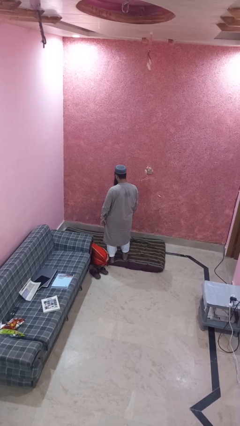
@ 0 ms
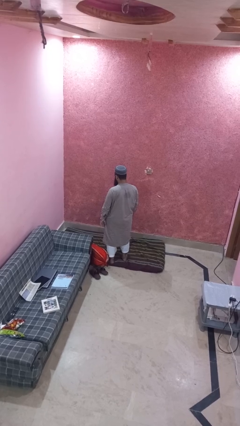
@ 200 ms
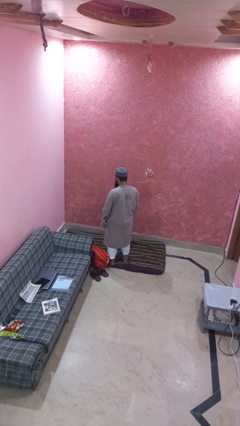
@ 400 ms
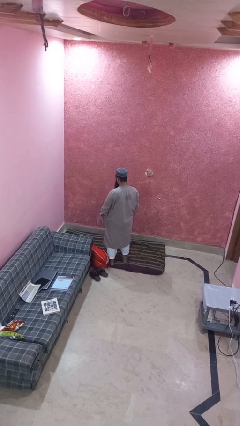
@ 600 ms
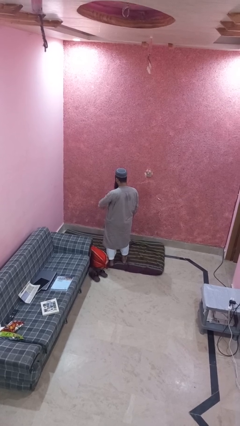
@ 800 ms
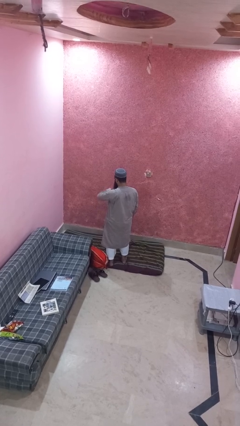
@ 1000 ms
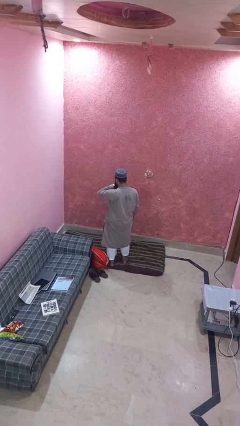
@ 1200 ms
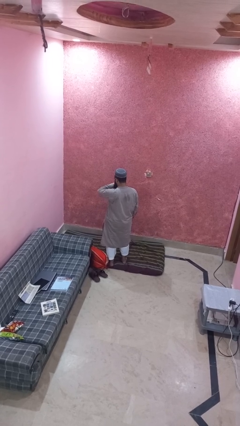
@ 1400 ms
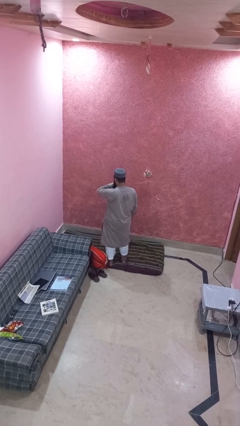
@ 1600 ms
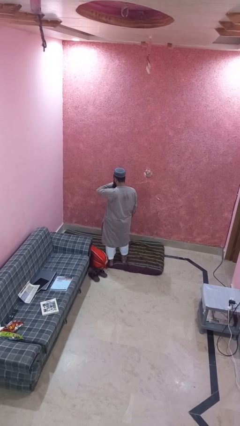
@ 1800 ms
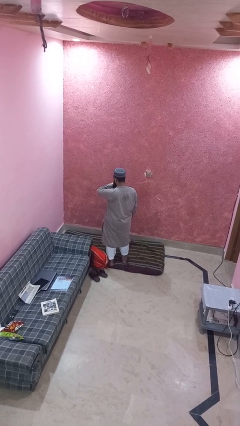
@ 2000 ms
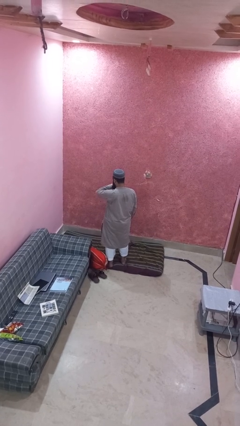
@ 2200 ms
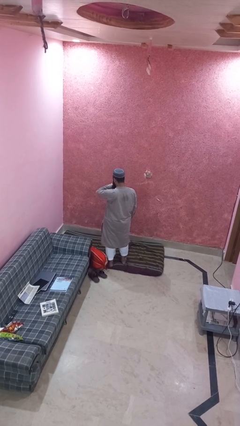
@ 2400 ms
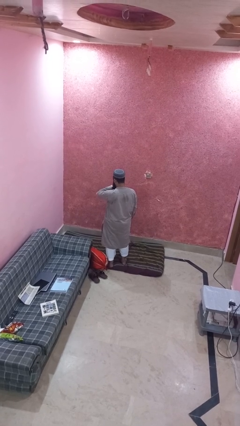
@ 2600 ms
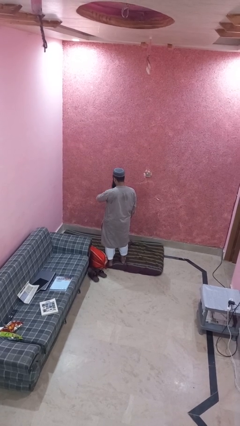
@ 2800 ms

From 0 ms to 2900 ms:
person looks at wristwatch

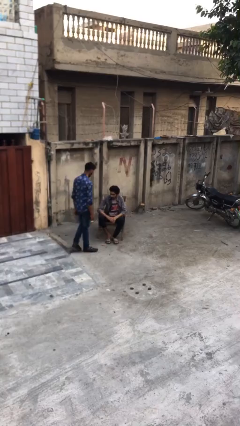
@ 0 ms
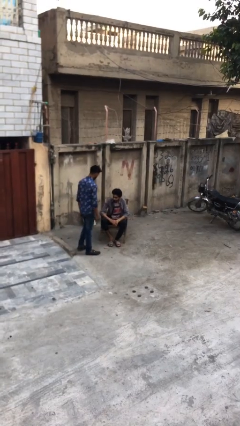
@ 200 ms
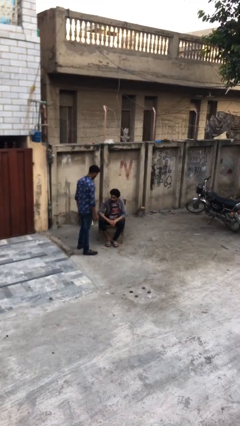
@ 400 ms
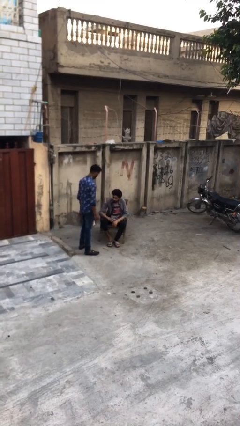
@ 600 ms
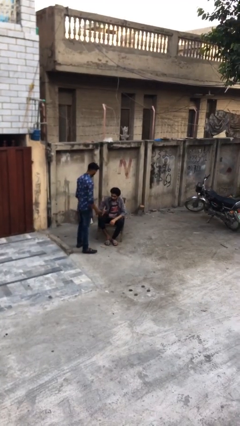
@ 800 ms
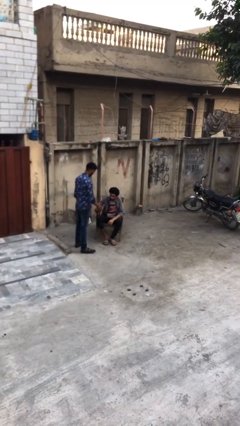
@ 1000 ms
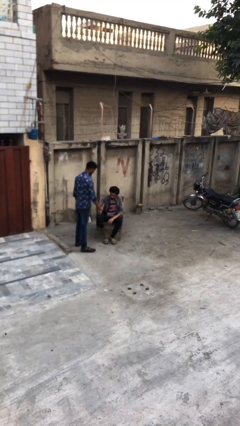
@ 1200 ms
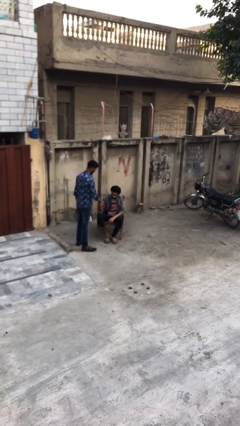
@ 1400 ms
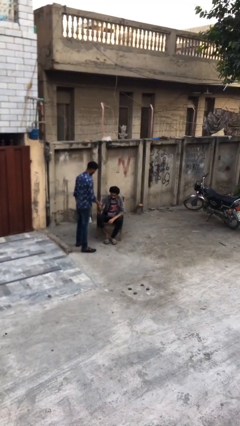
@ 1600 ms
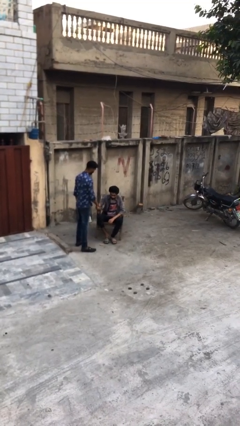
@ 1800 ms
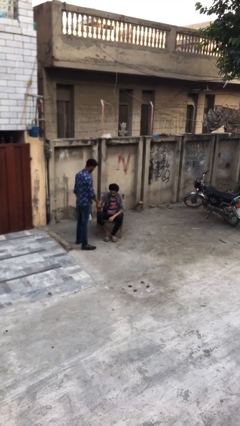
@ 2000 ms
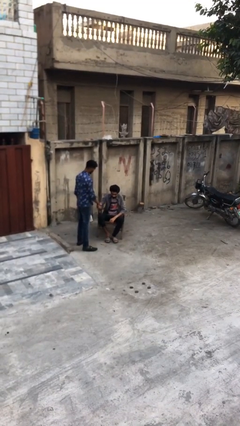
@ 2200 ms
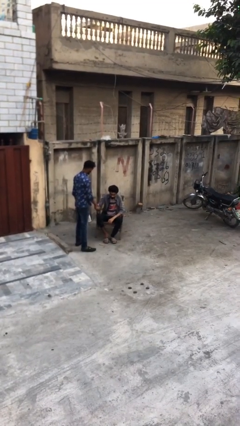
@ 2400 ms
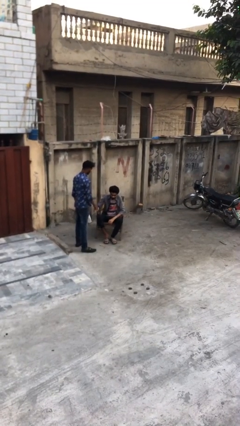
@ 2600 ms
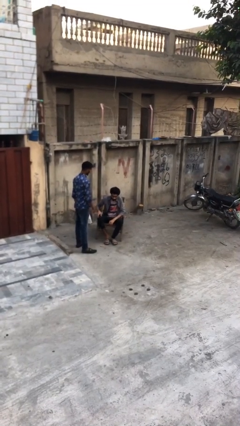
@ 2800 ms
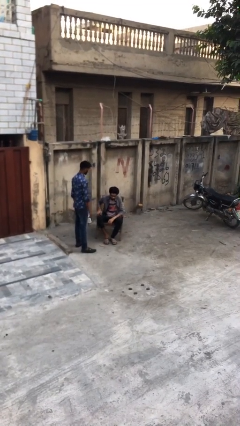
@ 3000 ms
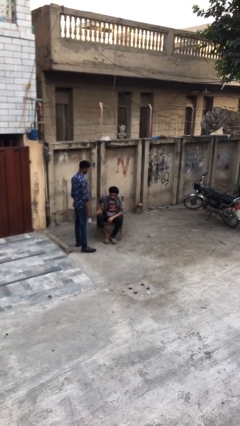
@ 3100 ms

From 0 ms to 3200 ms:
person shakes hand

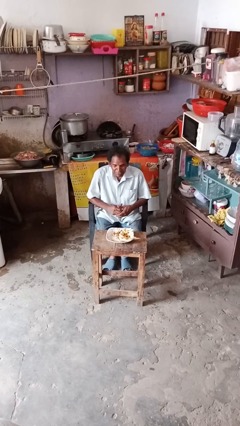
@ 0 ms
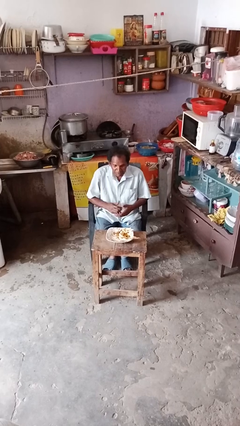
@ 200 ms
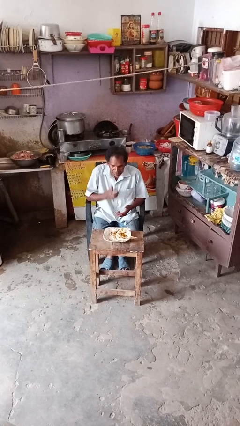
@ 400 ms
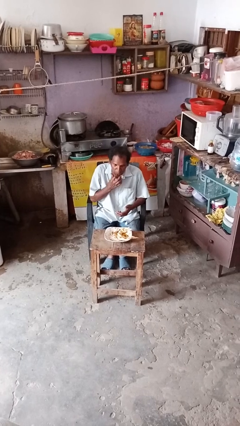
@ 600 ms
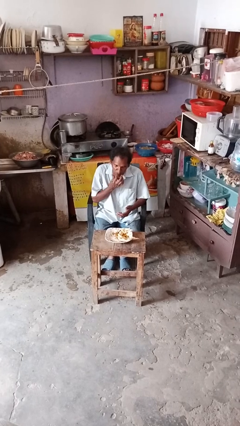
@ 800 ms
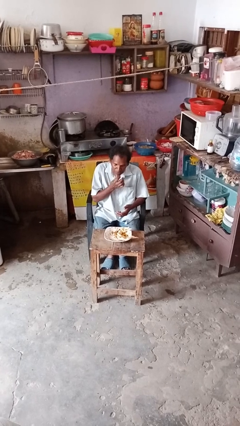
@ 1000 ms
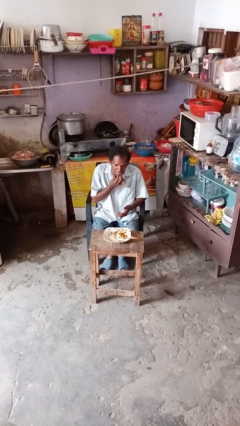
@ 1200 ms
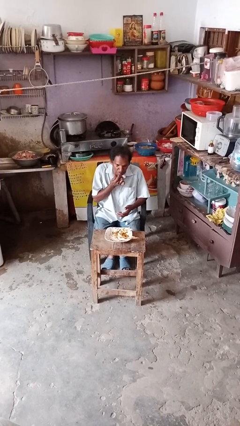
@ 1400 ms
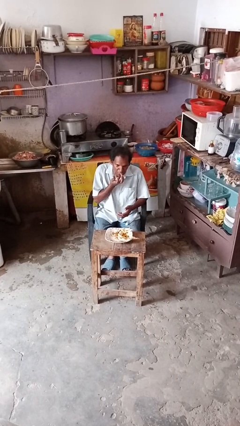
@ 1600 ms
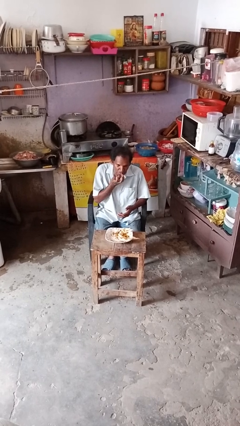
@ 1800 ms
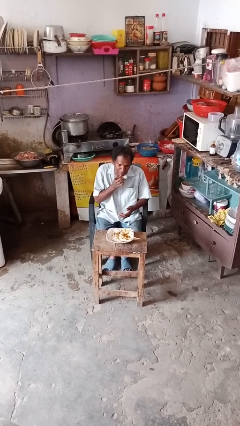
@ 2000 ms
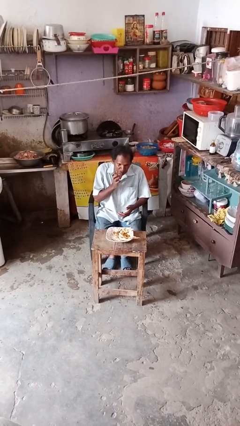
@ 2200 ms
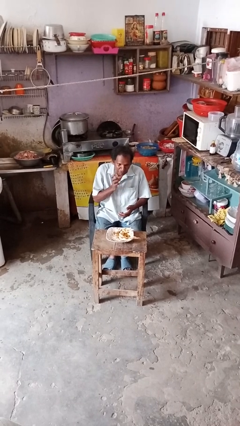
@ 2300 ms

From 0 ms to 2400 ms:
person licks fingers

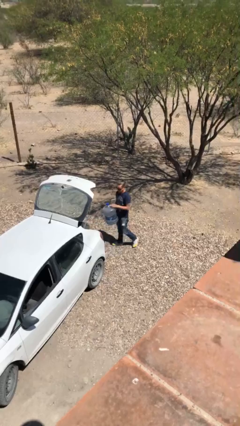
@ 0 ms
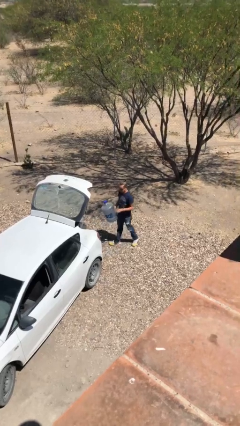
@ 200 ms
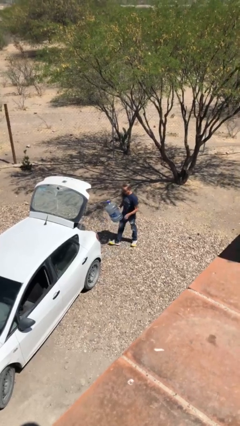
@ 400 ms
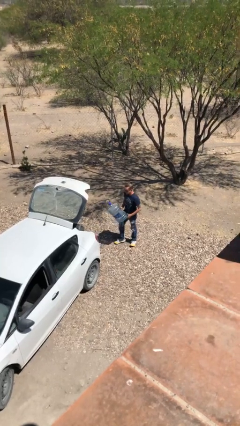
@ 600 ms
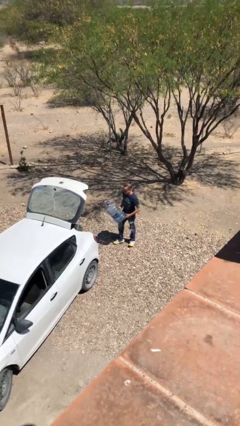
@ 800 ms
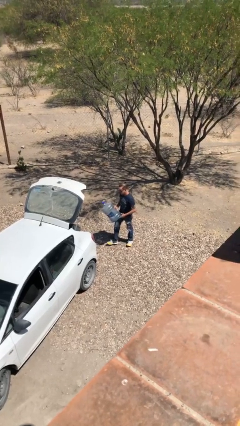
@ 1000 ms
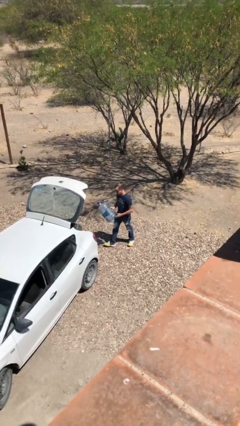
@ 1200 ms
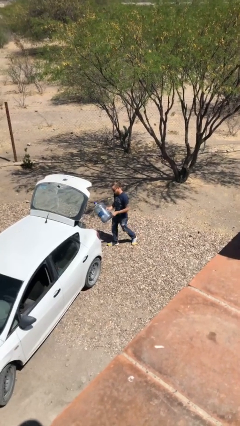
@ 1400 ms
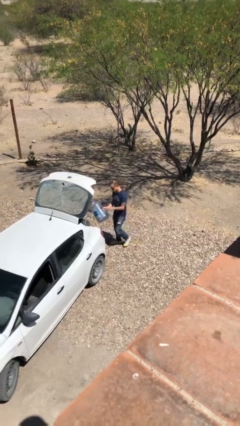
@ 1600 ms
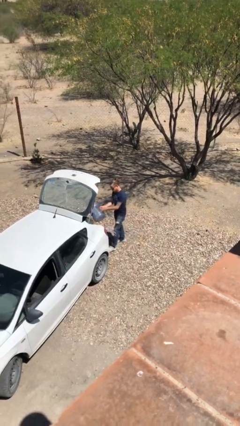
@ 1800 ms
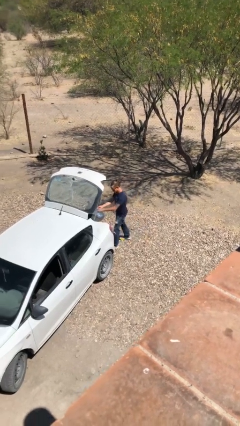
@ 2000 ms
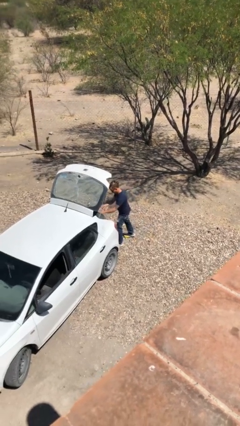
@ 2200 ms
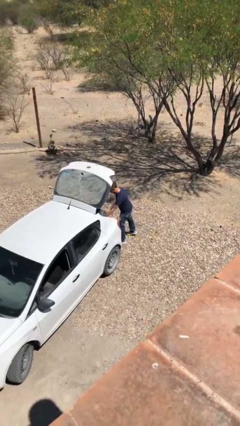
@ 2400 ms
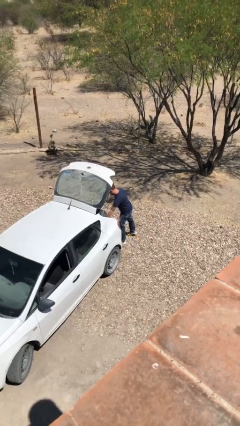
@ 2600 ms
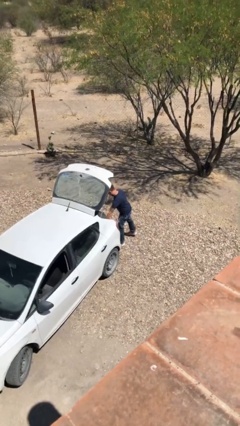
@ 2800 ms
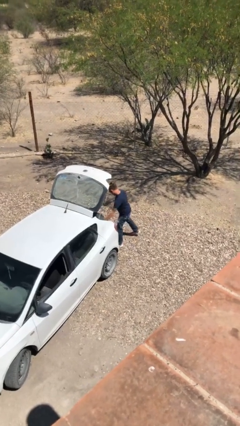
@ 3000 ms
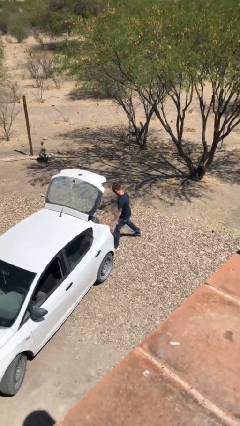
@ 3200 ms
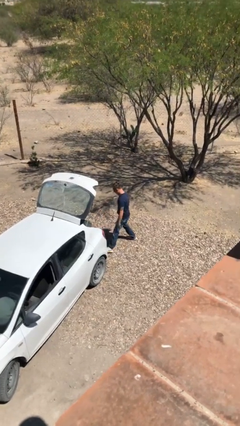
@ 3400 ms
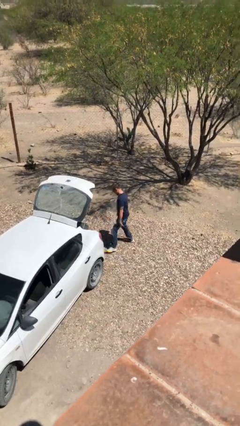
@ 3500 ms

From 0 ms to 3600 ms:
person loads car

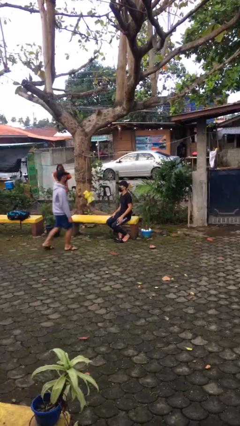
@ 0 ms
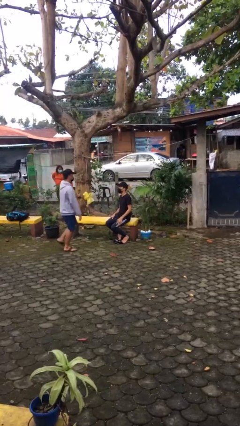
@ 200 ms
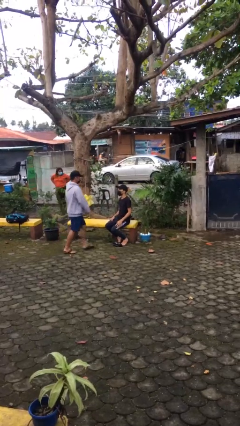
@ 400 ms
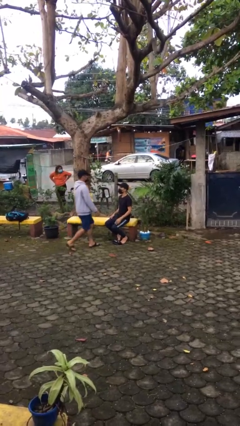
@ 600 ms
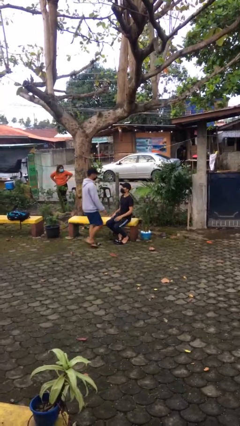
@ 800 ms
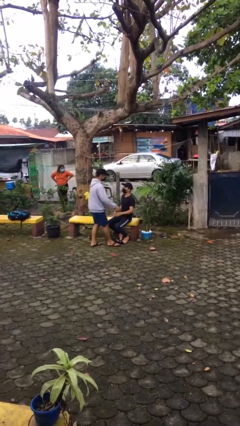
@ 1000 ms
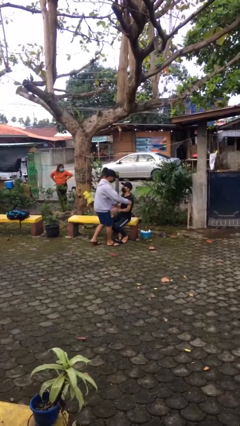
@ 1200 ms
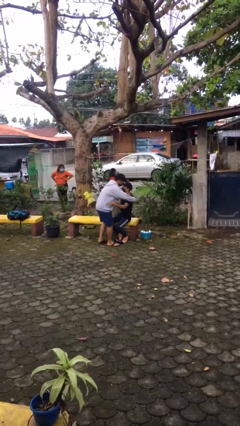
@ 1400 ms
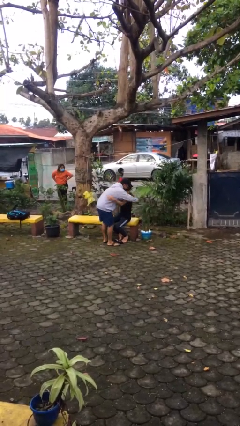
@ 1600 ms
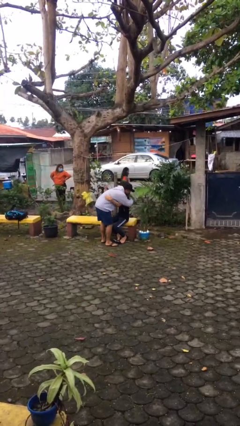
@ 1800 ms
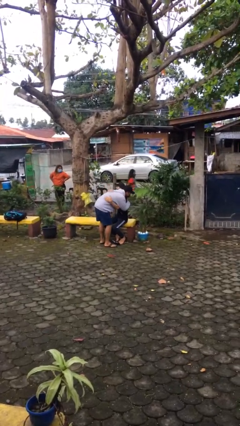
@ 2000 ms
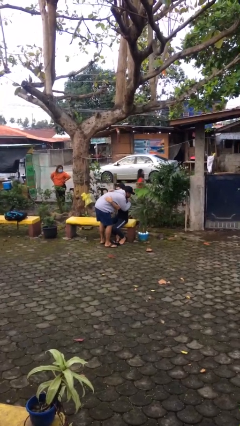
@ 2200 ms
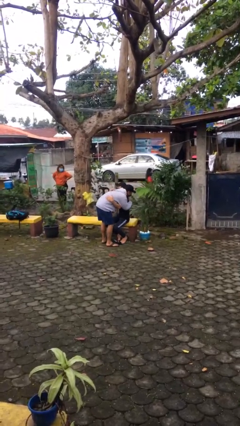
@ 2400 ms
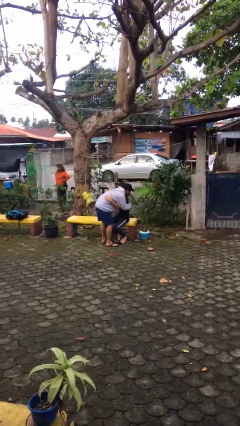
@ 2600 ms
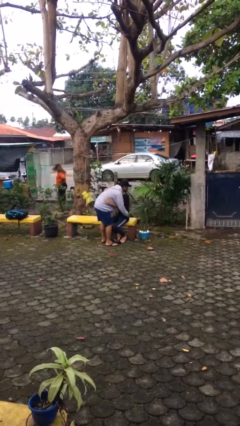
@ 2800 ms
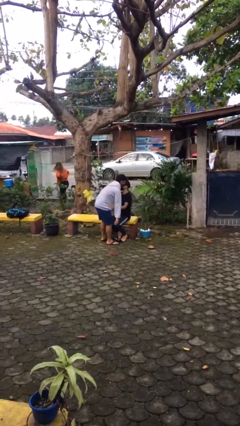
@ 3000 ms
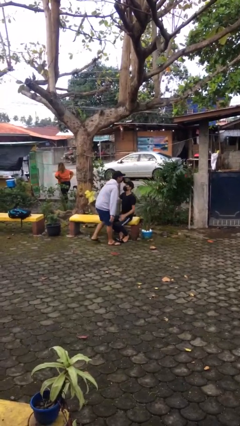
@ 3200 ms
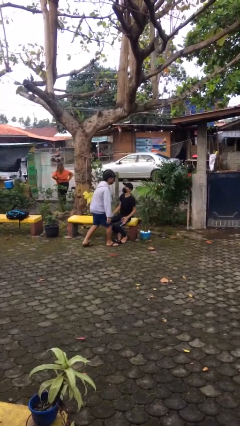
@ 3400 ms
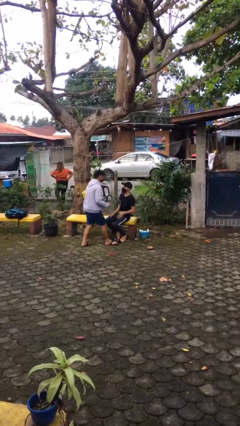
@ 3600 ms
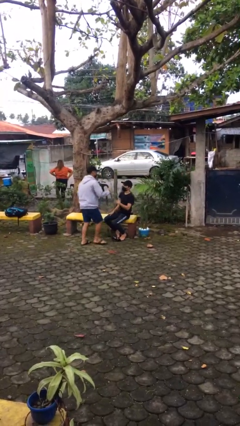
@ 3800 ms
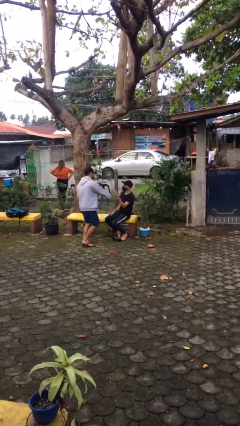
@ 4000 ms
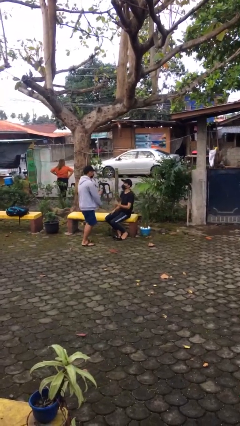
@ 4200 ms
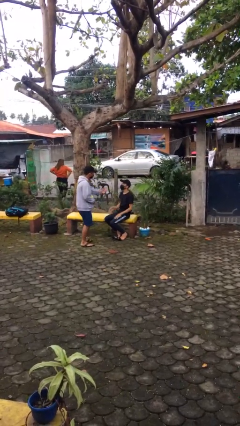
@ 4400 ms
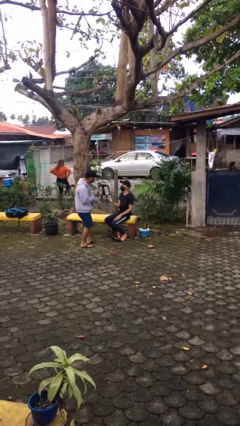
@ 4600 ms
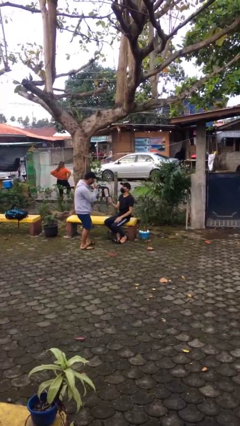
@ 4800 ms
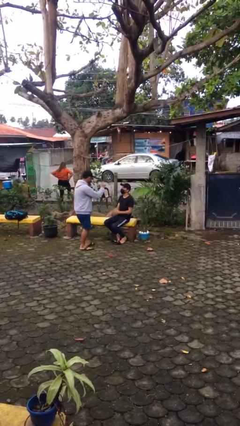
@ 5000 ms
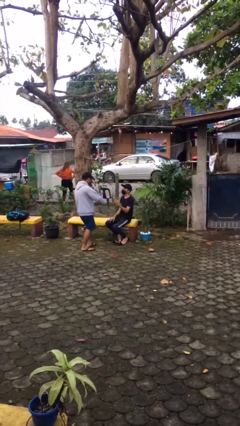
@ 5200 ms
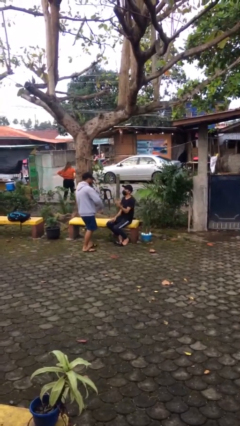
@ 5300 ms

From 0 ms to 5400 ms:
person embraces person
